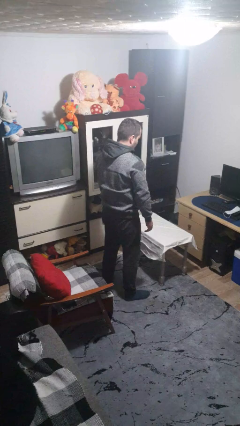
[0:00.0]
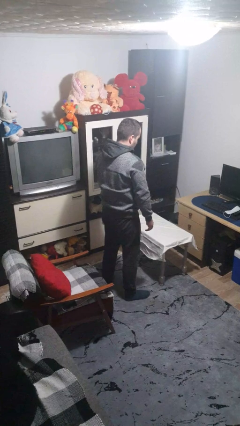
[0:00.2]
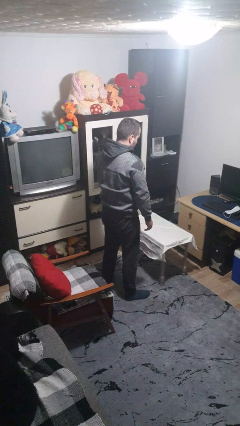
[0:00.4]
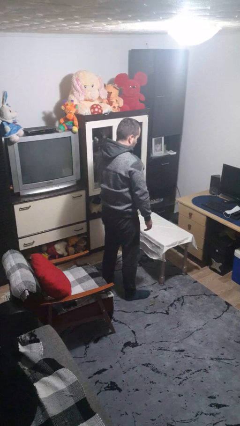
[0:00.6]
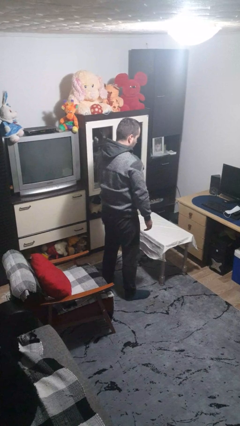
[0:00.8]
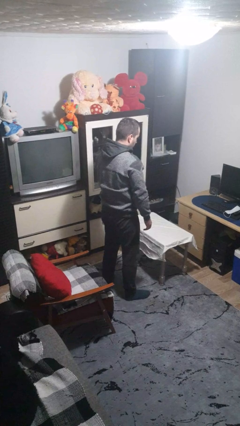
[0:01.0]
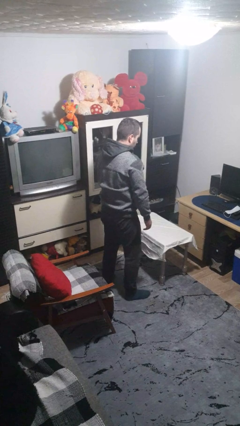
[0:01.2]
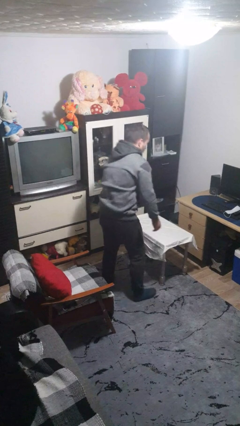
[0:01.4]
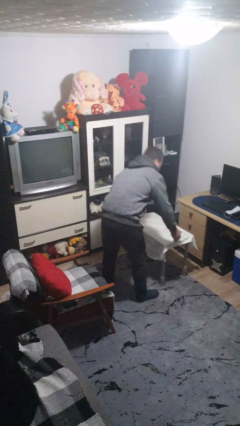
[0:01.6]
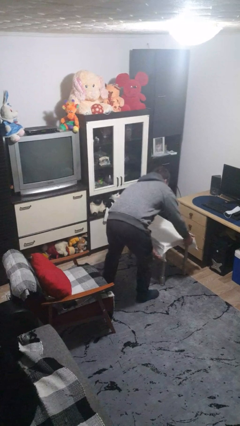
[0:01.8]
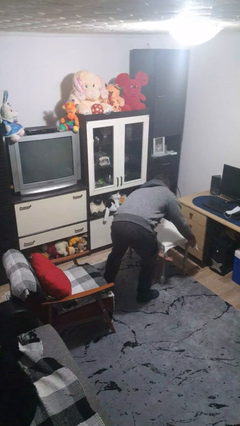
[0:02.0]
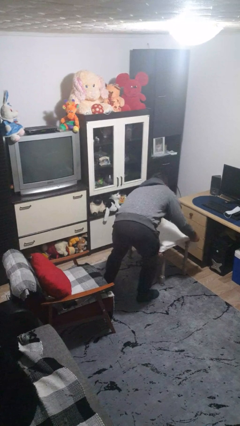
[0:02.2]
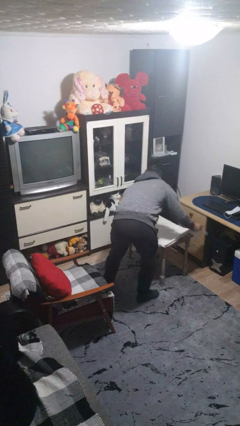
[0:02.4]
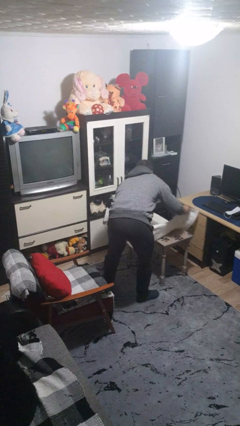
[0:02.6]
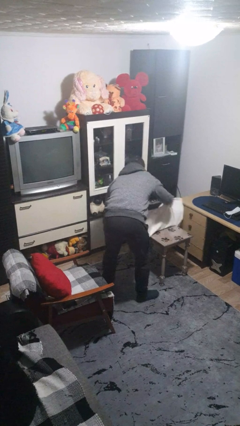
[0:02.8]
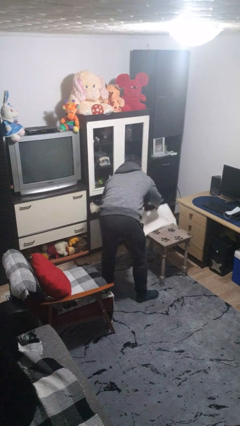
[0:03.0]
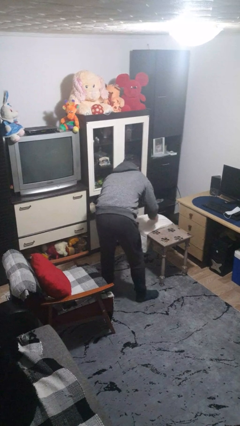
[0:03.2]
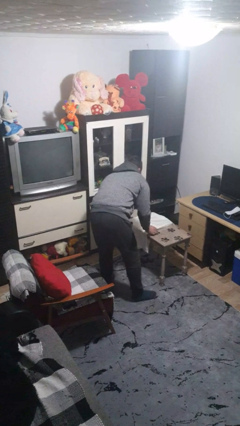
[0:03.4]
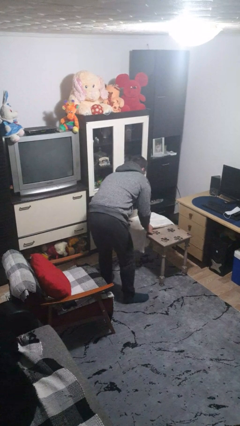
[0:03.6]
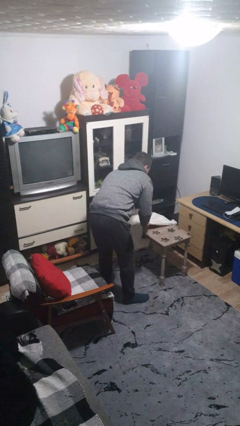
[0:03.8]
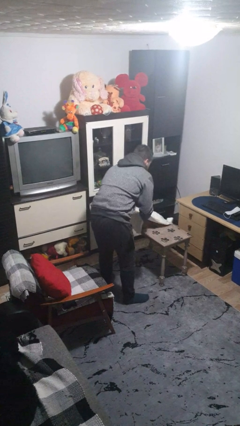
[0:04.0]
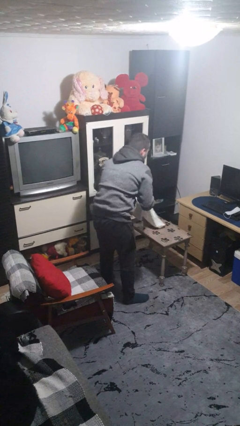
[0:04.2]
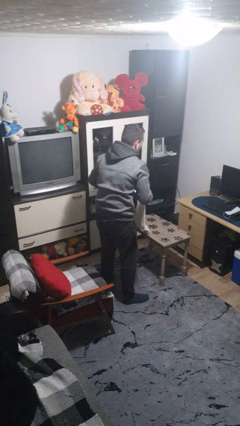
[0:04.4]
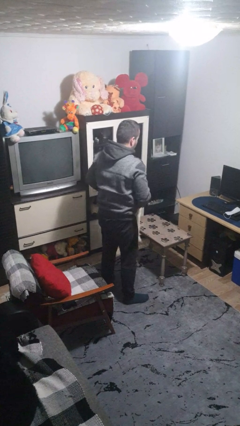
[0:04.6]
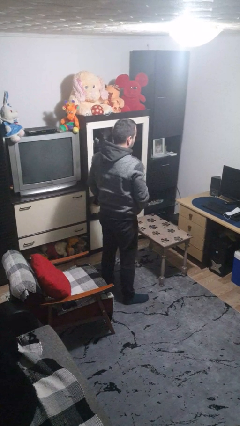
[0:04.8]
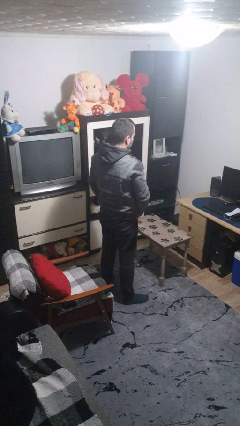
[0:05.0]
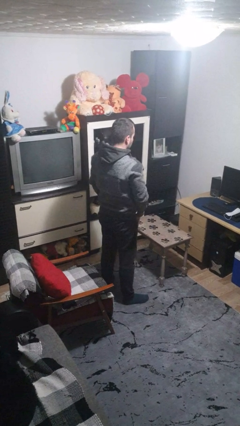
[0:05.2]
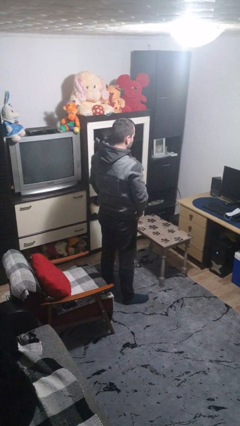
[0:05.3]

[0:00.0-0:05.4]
person folds tablecloth

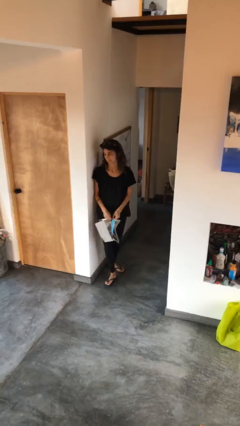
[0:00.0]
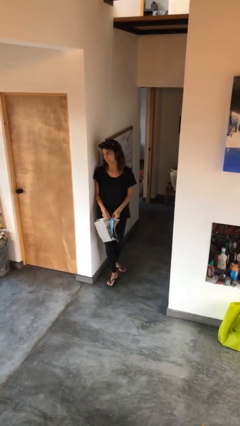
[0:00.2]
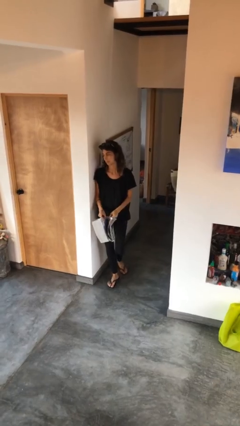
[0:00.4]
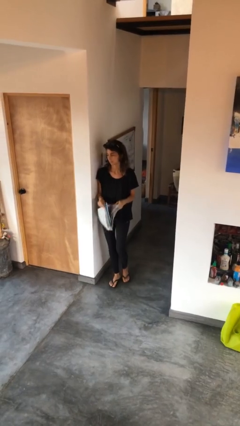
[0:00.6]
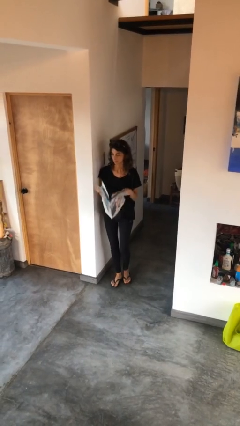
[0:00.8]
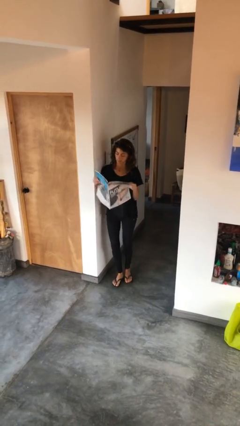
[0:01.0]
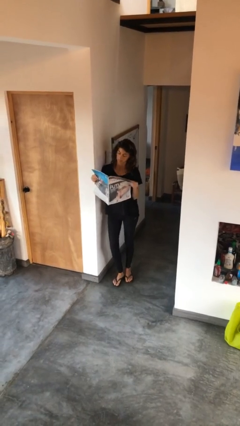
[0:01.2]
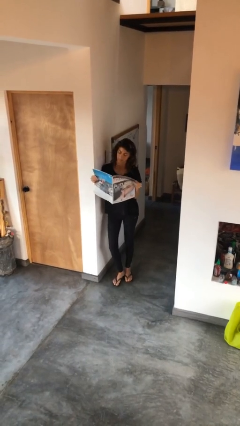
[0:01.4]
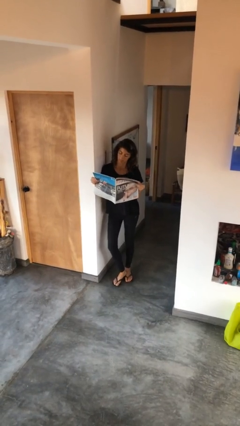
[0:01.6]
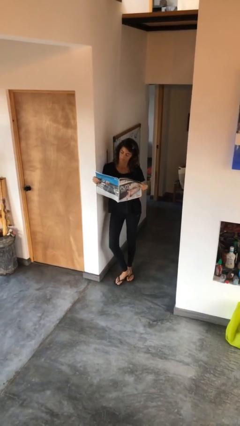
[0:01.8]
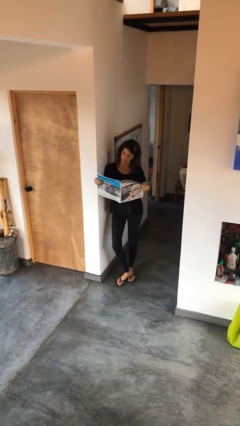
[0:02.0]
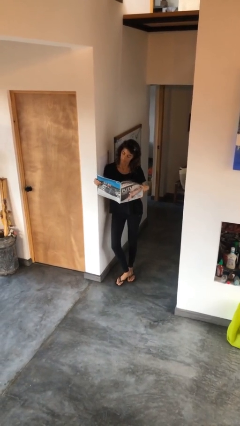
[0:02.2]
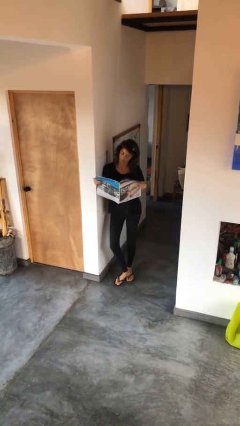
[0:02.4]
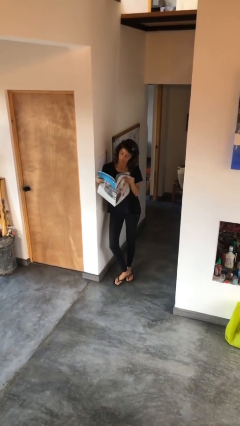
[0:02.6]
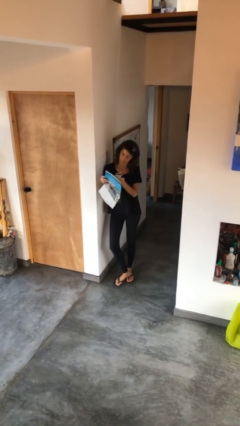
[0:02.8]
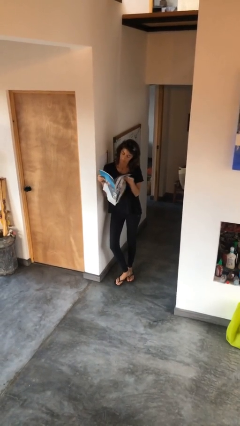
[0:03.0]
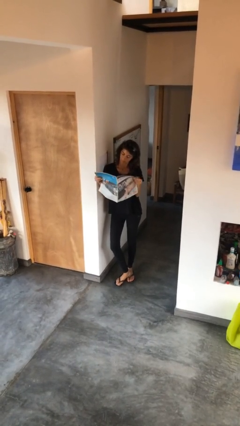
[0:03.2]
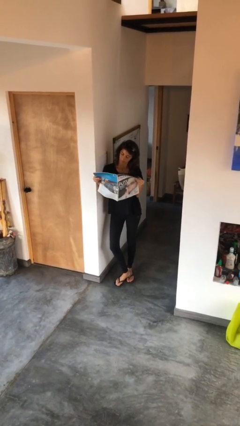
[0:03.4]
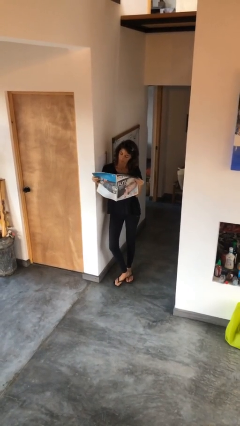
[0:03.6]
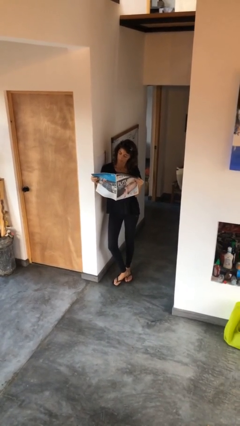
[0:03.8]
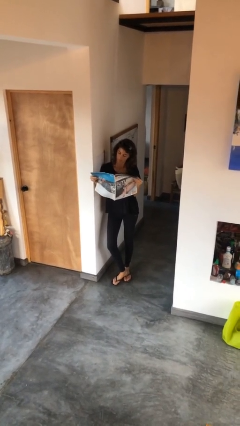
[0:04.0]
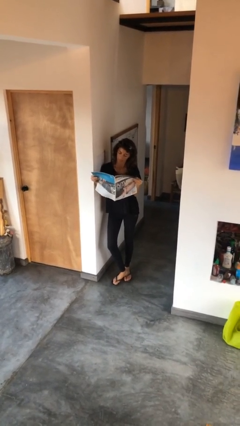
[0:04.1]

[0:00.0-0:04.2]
person reads newspaper

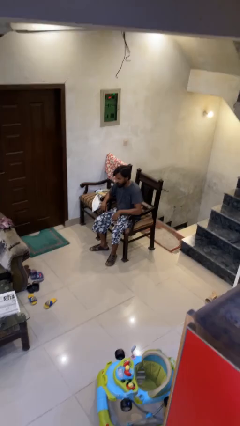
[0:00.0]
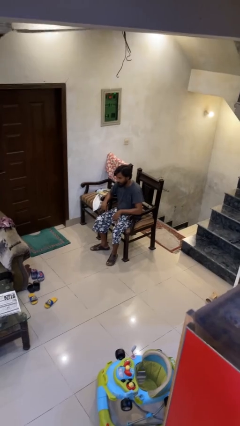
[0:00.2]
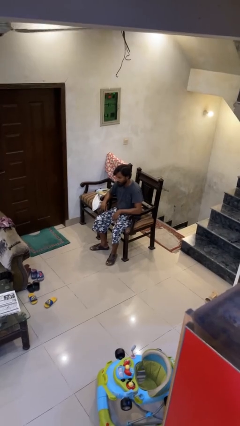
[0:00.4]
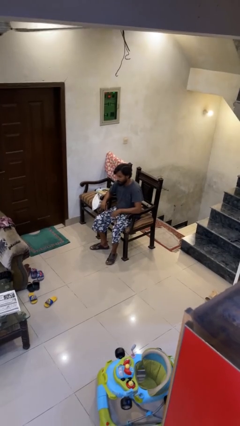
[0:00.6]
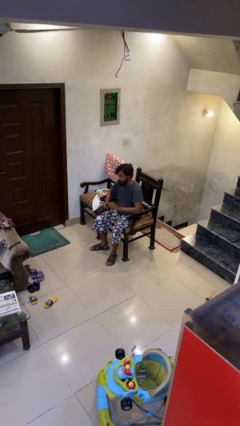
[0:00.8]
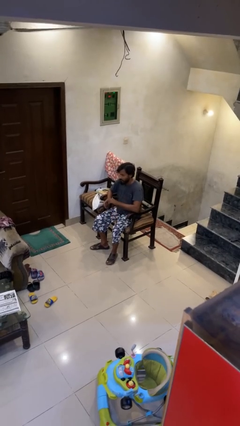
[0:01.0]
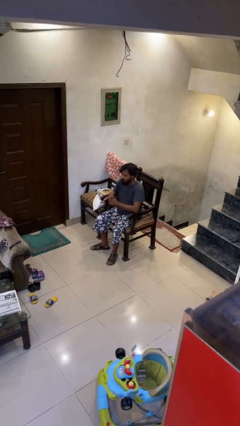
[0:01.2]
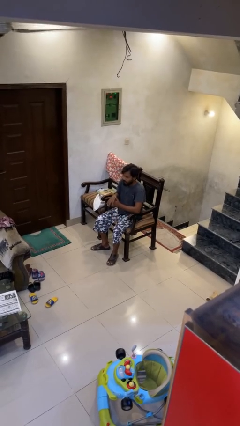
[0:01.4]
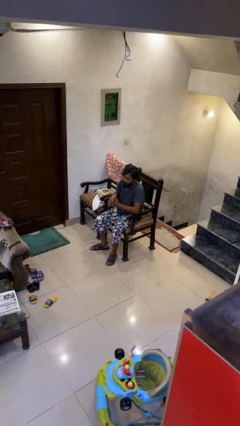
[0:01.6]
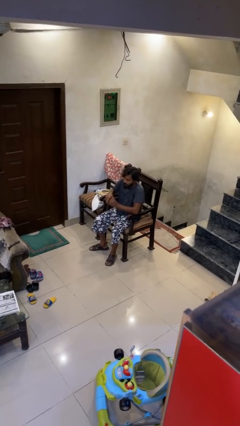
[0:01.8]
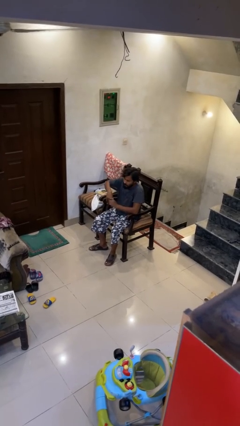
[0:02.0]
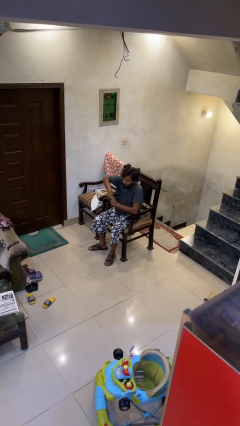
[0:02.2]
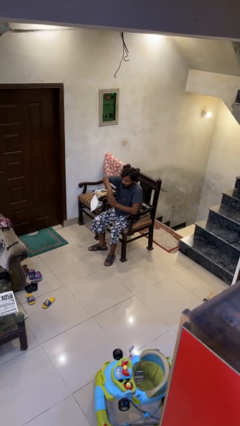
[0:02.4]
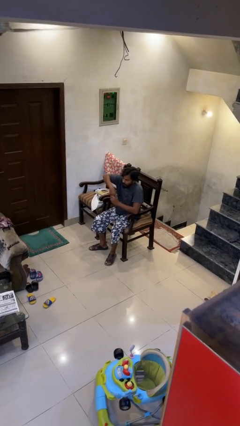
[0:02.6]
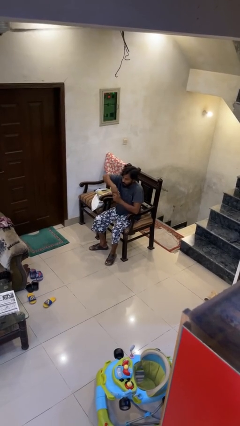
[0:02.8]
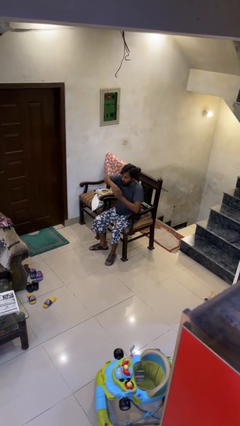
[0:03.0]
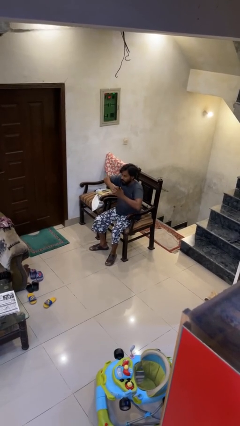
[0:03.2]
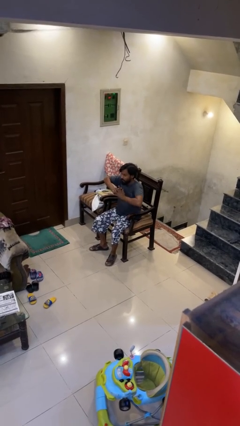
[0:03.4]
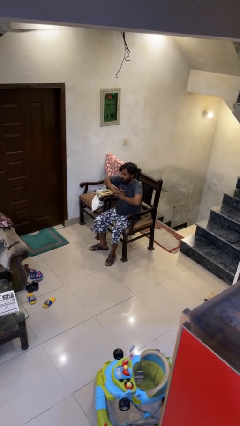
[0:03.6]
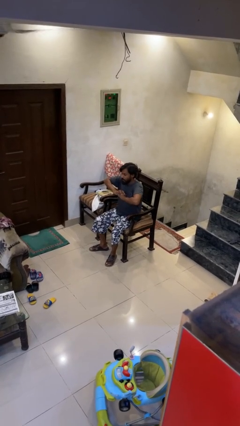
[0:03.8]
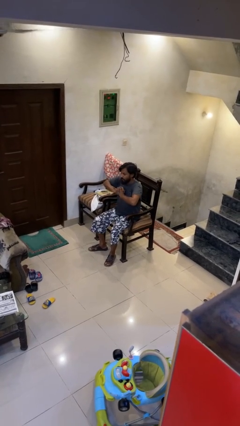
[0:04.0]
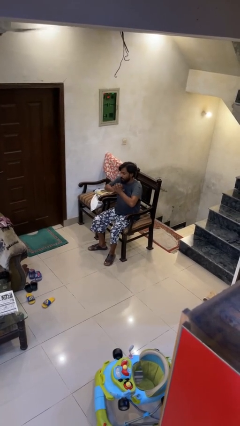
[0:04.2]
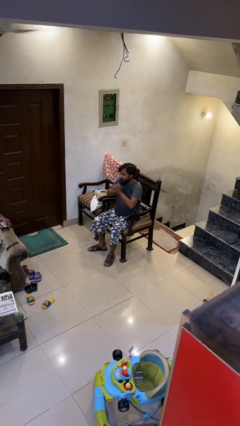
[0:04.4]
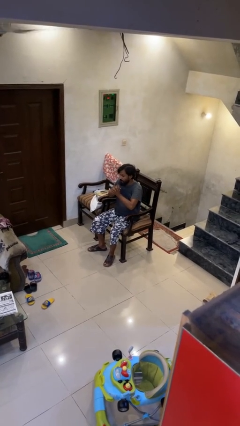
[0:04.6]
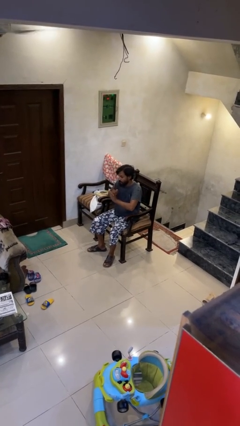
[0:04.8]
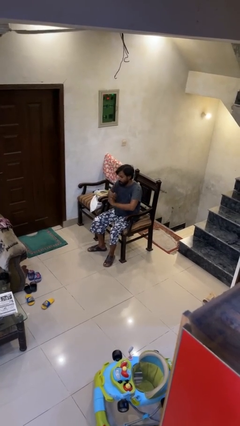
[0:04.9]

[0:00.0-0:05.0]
person cracks knuckles

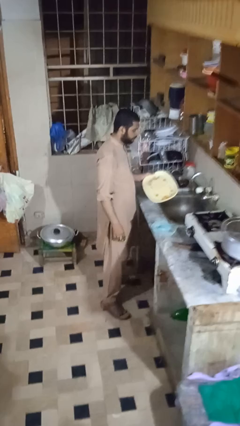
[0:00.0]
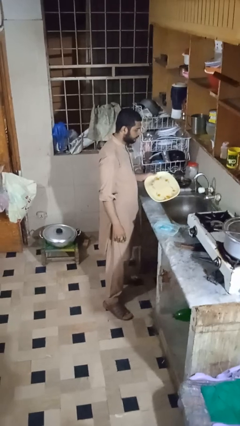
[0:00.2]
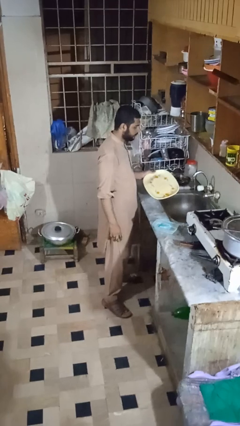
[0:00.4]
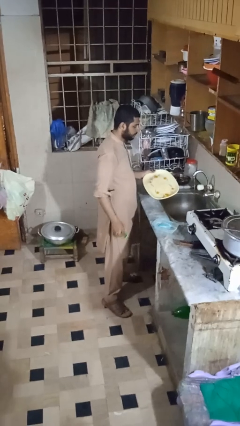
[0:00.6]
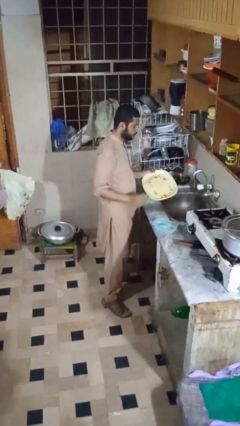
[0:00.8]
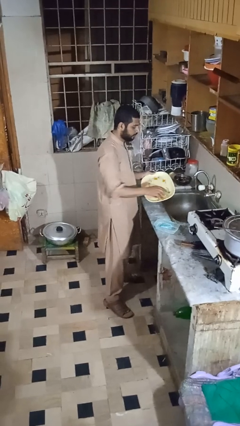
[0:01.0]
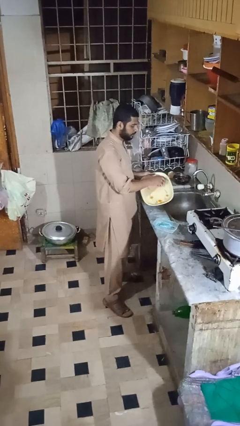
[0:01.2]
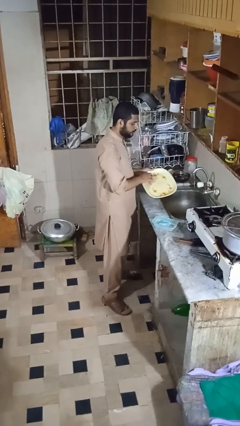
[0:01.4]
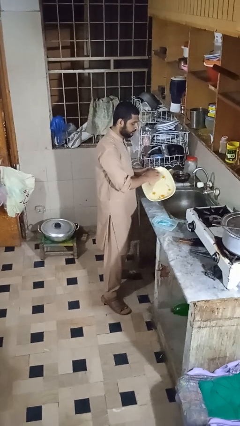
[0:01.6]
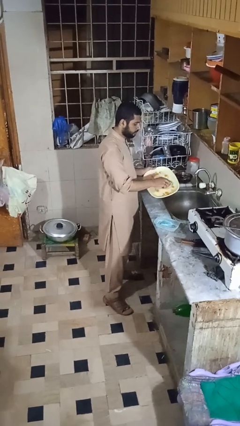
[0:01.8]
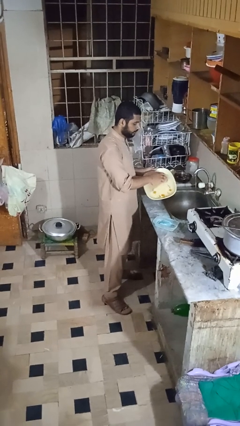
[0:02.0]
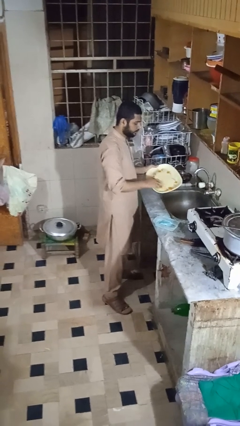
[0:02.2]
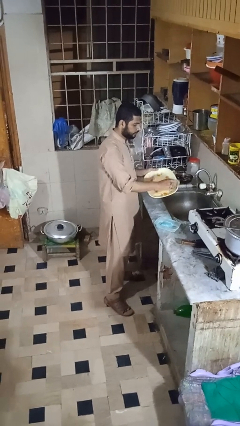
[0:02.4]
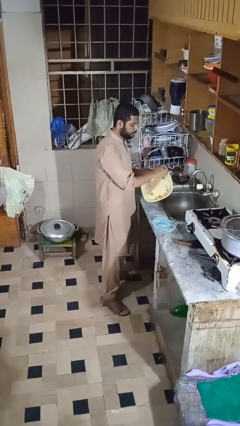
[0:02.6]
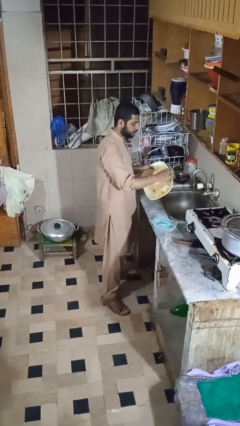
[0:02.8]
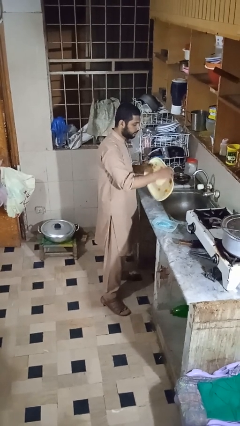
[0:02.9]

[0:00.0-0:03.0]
person washes dish
